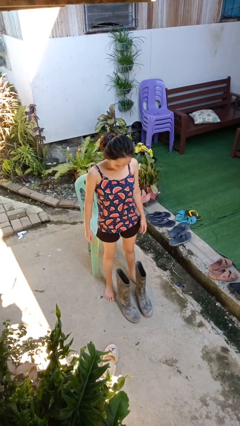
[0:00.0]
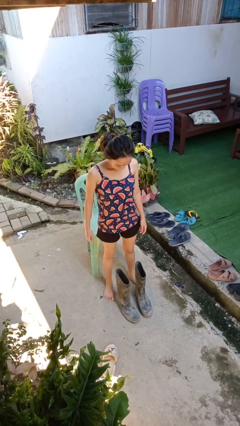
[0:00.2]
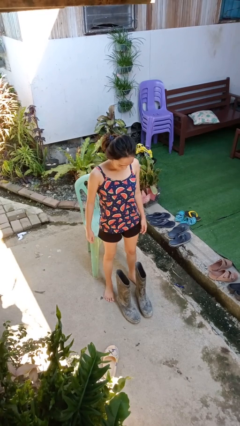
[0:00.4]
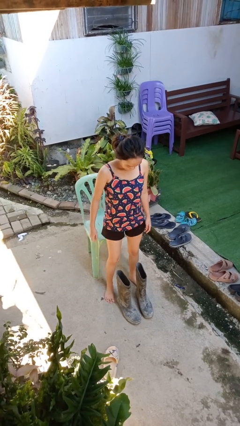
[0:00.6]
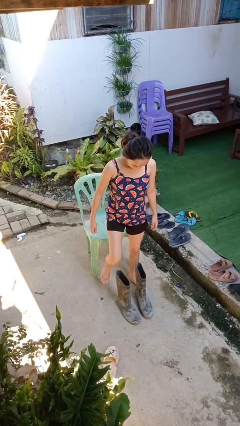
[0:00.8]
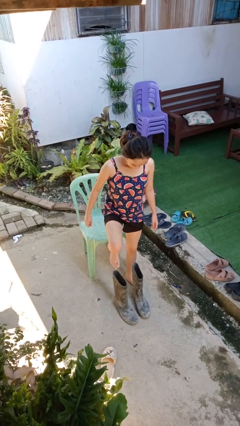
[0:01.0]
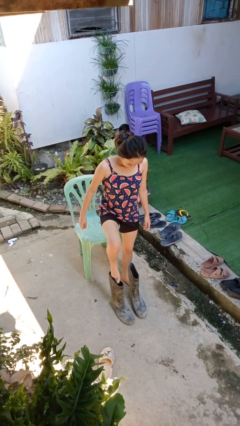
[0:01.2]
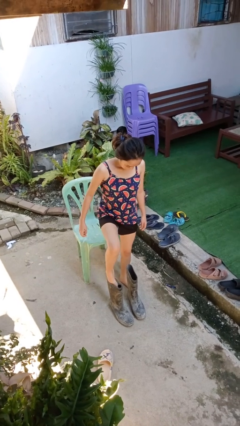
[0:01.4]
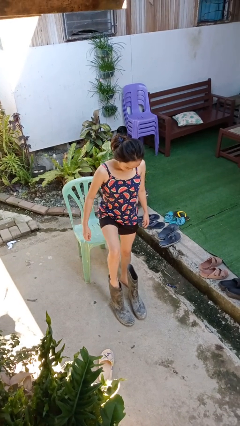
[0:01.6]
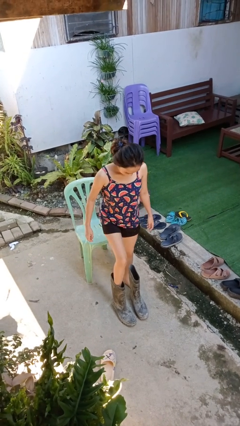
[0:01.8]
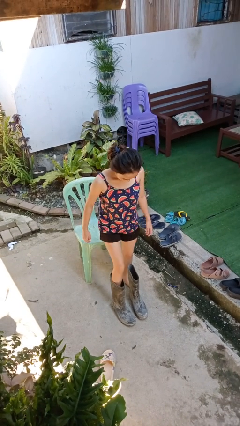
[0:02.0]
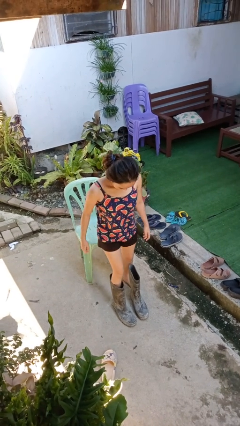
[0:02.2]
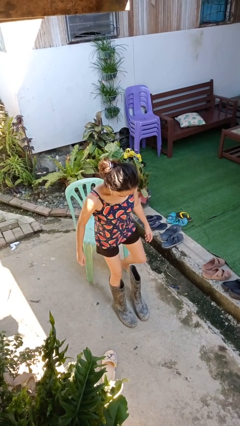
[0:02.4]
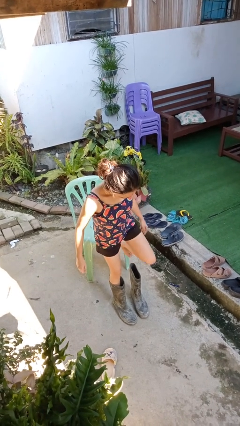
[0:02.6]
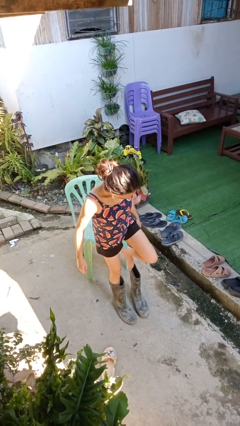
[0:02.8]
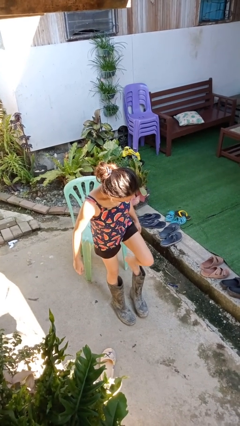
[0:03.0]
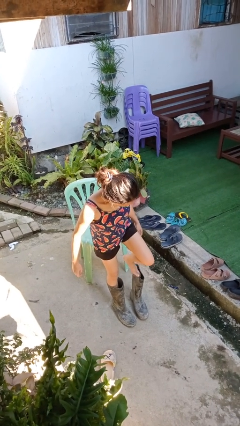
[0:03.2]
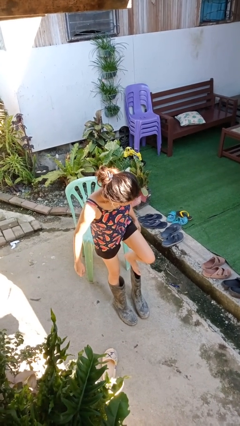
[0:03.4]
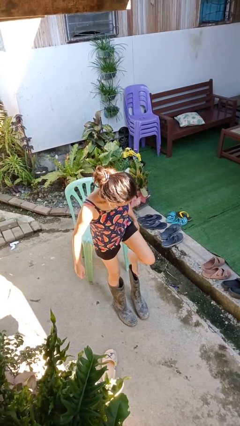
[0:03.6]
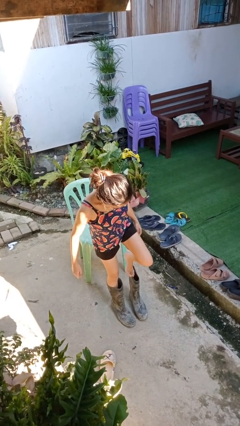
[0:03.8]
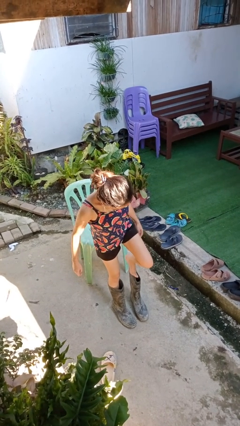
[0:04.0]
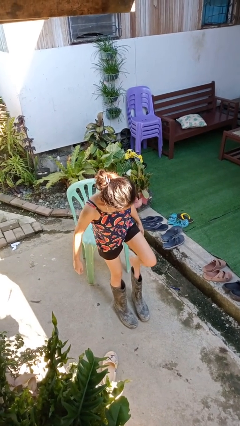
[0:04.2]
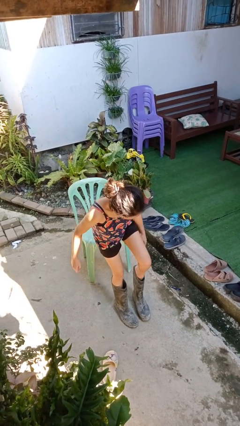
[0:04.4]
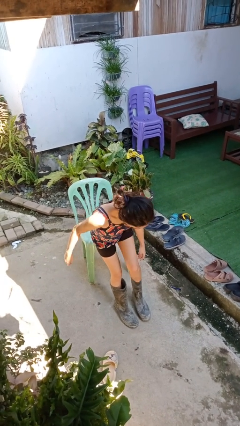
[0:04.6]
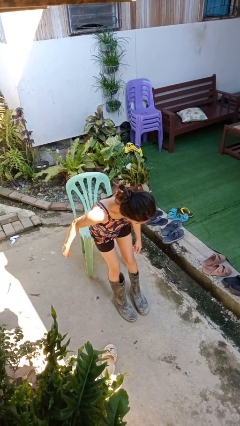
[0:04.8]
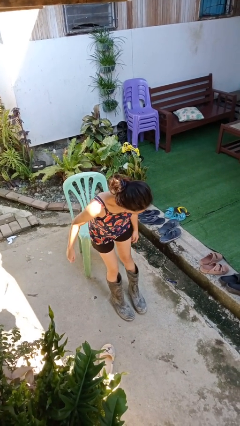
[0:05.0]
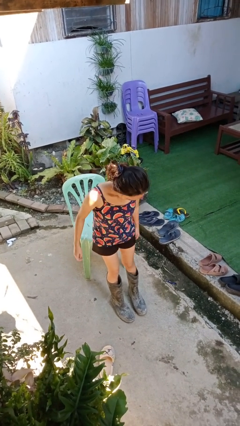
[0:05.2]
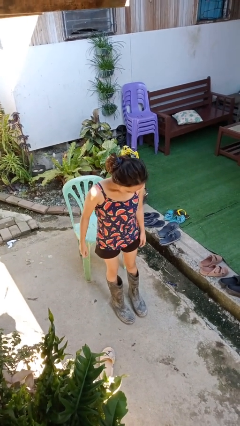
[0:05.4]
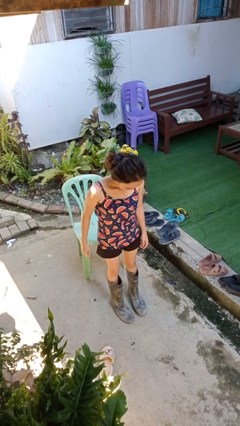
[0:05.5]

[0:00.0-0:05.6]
person puts on boots

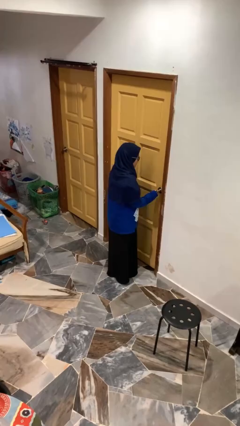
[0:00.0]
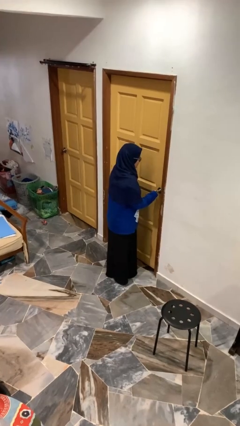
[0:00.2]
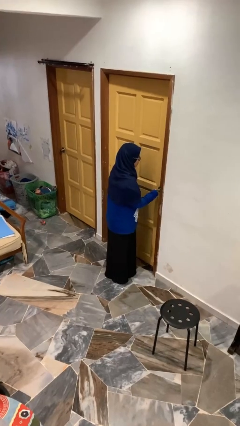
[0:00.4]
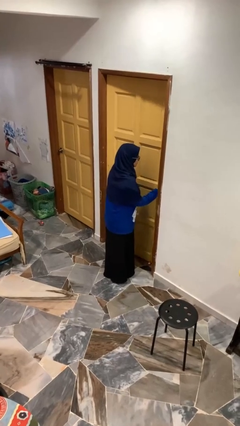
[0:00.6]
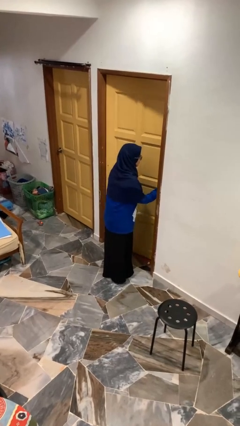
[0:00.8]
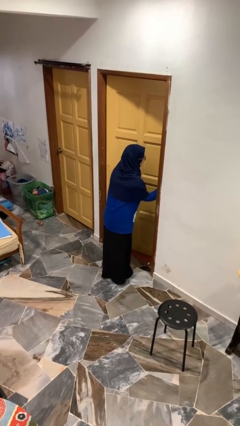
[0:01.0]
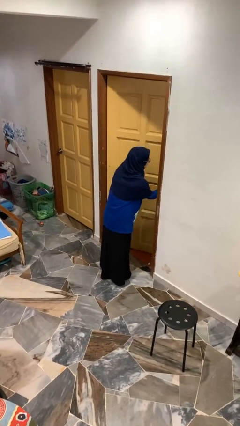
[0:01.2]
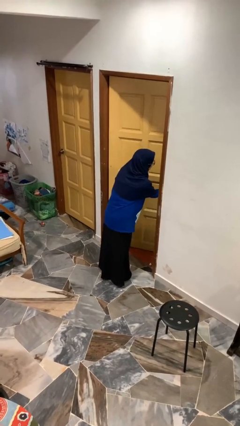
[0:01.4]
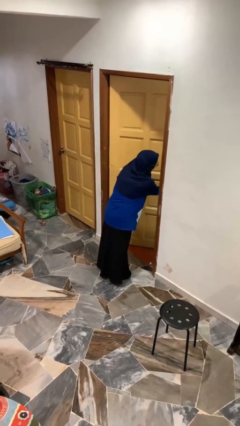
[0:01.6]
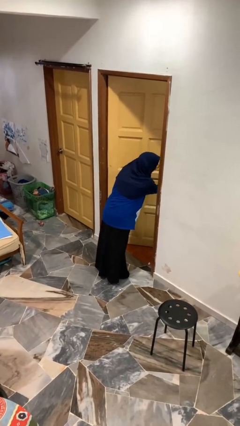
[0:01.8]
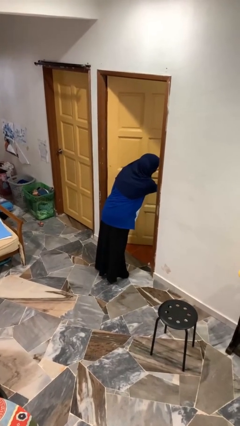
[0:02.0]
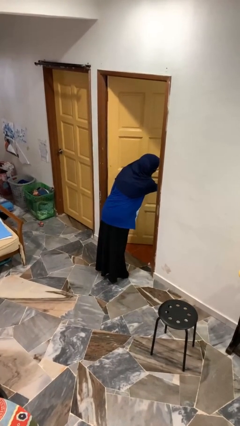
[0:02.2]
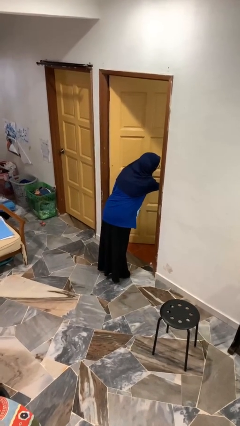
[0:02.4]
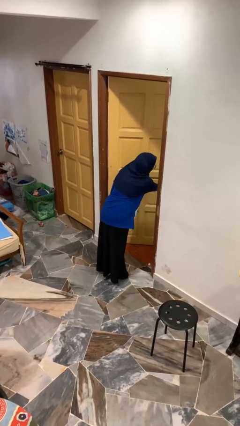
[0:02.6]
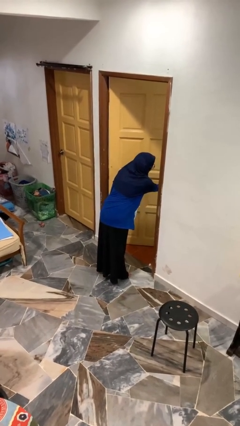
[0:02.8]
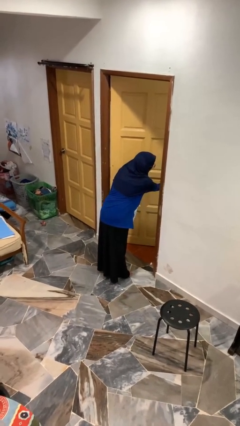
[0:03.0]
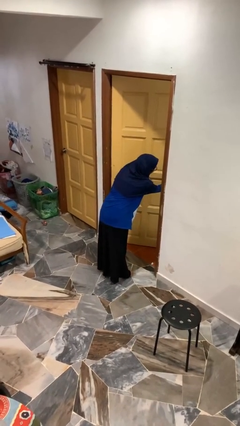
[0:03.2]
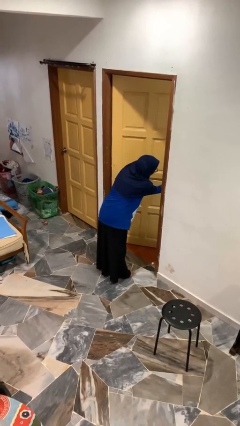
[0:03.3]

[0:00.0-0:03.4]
person opens facility door

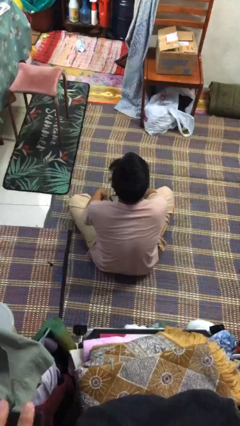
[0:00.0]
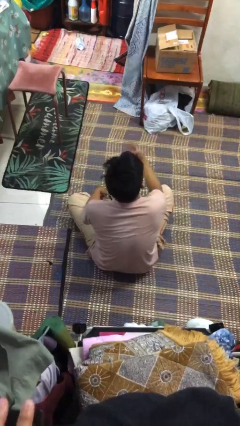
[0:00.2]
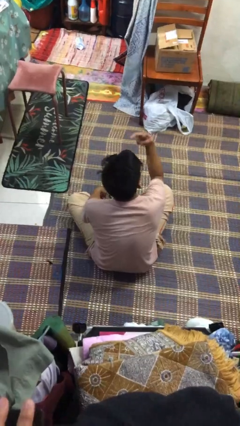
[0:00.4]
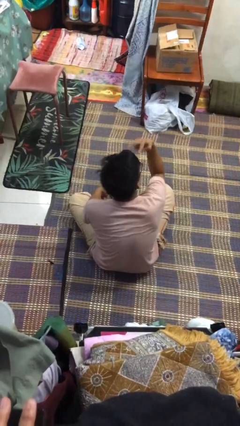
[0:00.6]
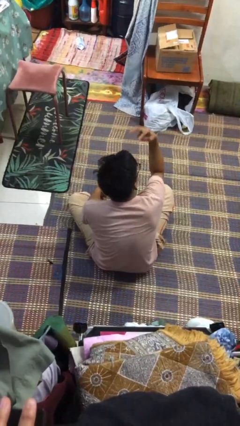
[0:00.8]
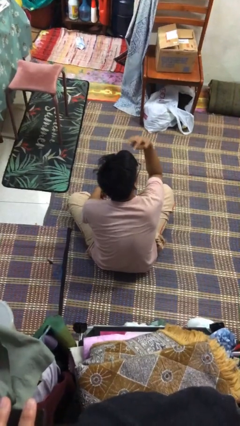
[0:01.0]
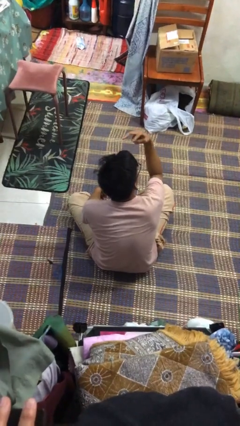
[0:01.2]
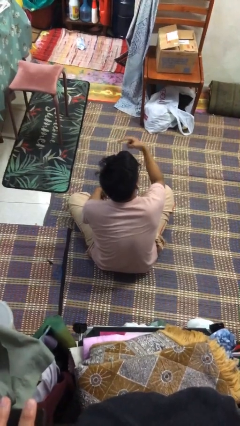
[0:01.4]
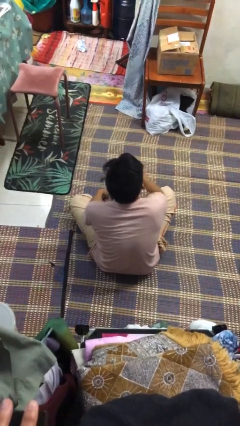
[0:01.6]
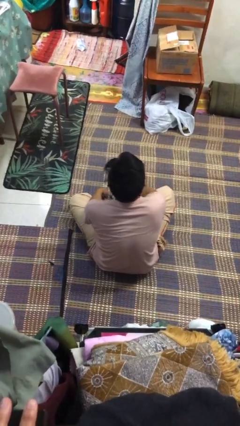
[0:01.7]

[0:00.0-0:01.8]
person gestures watch closely

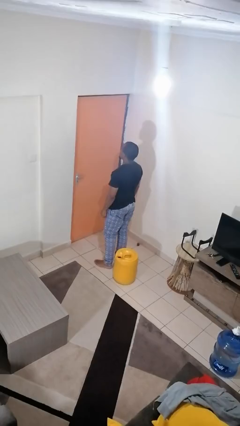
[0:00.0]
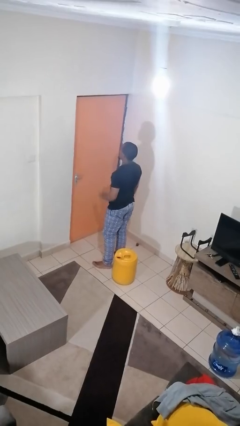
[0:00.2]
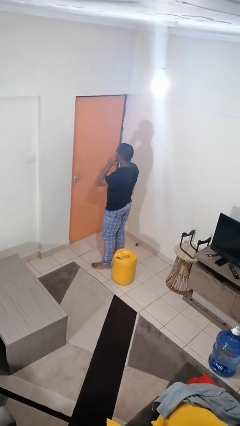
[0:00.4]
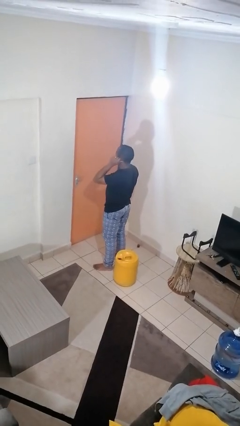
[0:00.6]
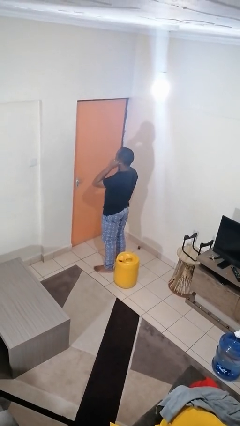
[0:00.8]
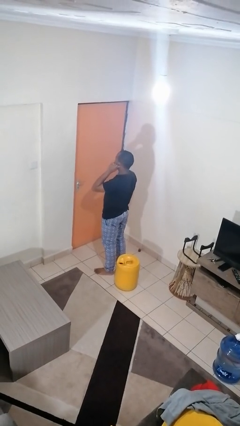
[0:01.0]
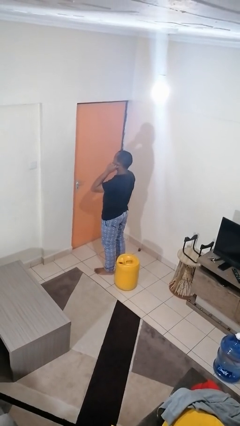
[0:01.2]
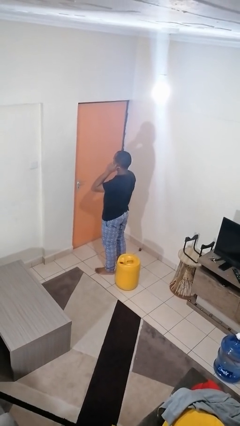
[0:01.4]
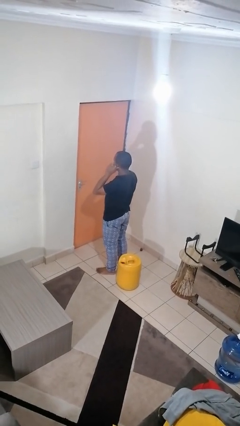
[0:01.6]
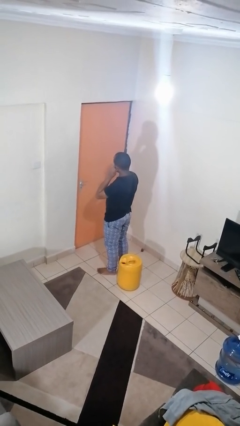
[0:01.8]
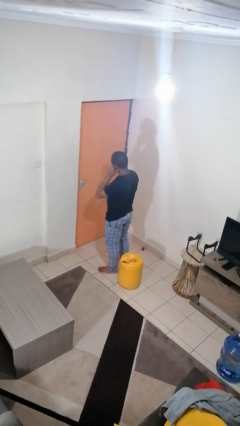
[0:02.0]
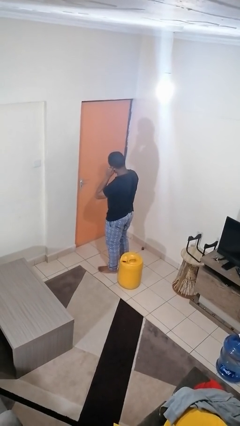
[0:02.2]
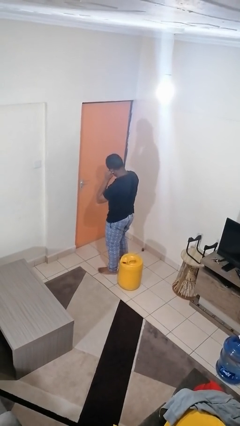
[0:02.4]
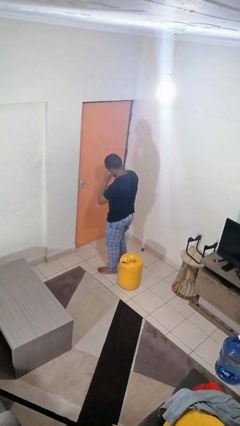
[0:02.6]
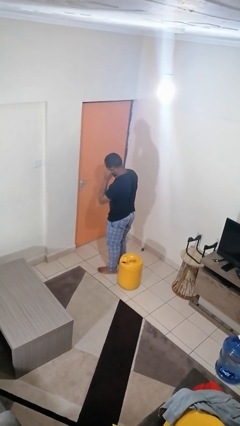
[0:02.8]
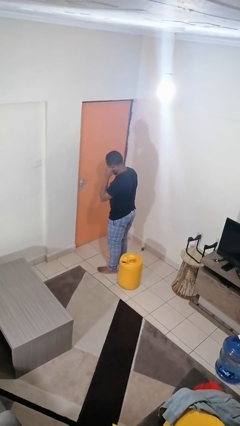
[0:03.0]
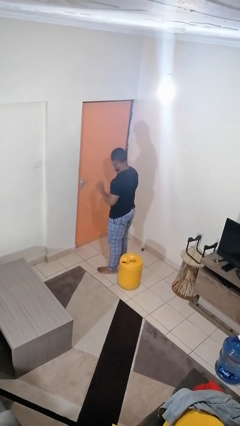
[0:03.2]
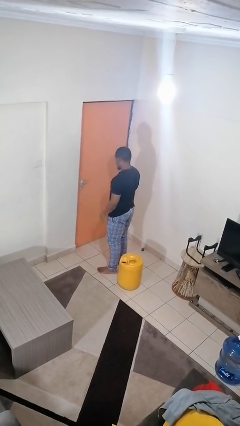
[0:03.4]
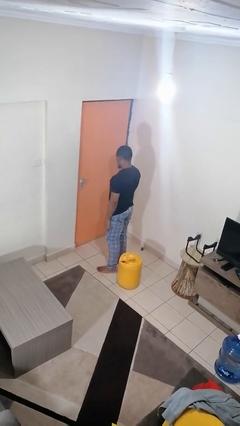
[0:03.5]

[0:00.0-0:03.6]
person touches earlobe

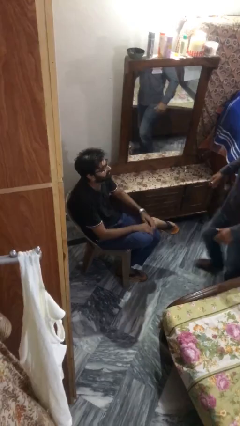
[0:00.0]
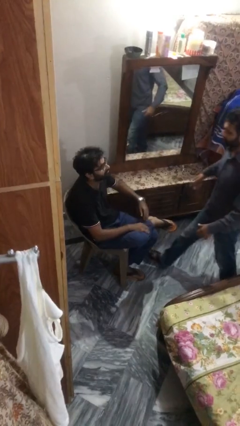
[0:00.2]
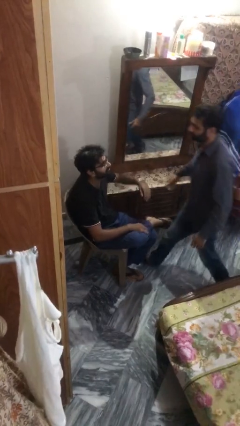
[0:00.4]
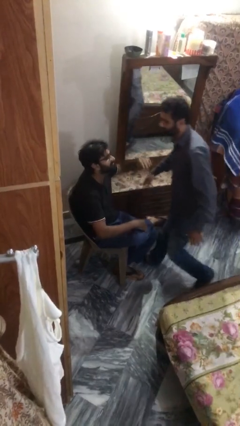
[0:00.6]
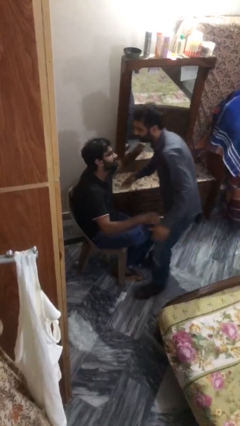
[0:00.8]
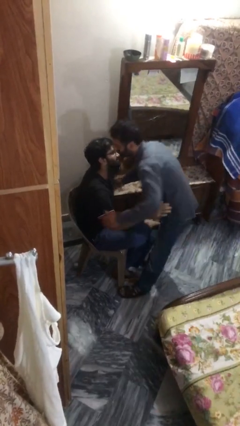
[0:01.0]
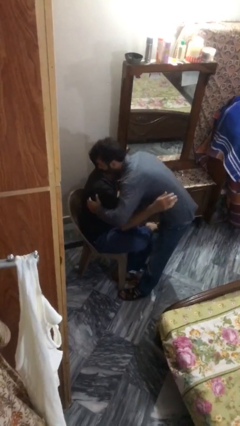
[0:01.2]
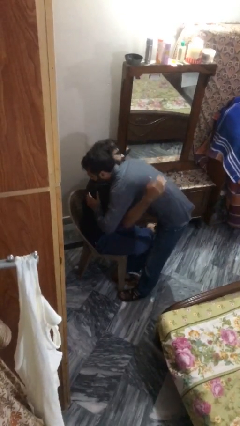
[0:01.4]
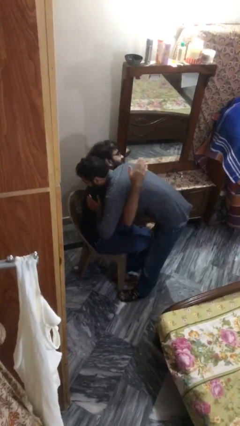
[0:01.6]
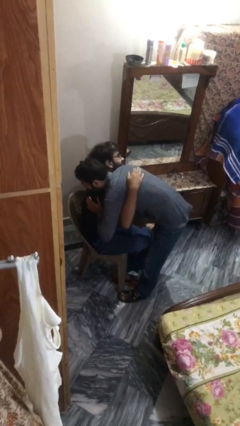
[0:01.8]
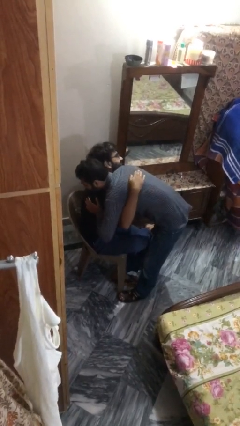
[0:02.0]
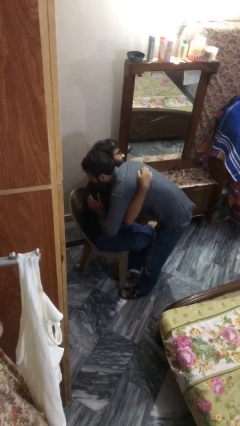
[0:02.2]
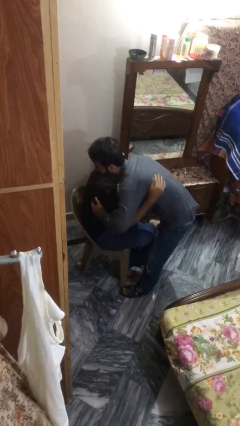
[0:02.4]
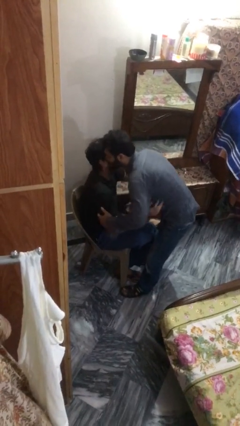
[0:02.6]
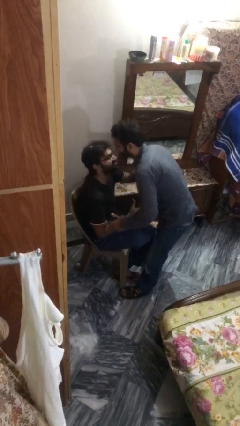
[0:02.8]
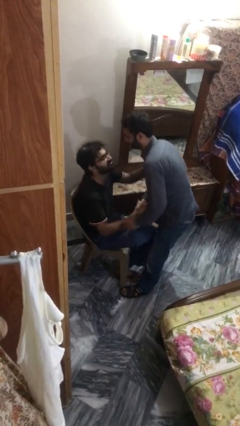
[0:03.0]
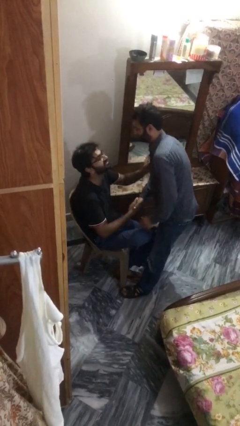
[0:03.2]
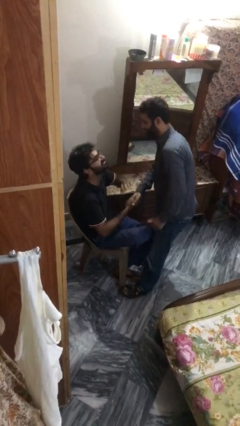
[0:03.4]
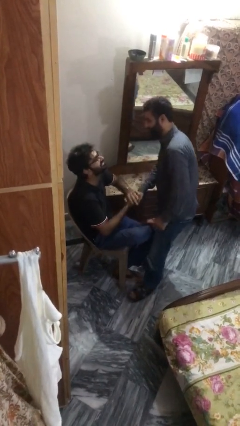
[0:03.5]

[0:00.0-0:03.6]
person embraces person
